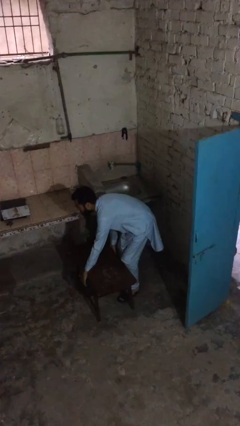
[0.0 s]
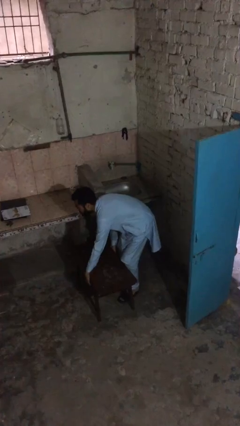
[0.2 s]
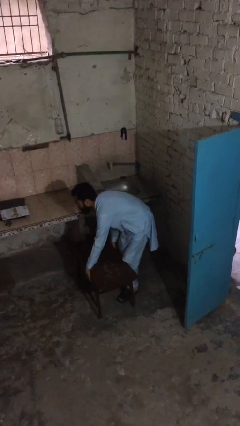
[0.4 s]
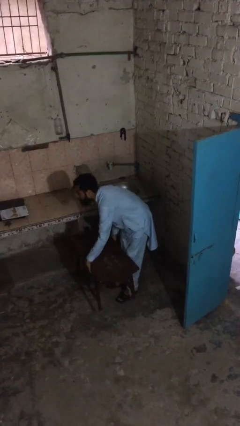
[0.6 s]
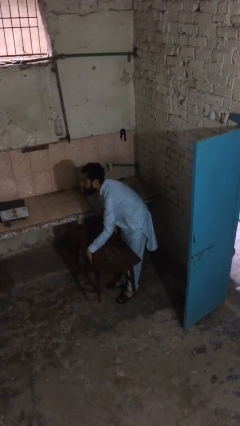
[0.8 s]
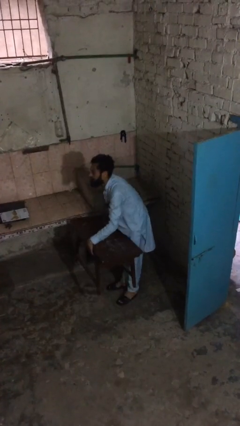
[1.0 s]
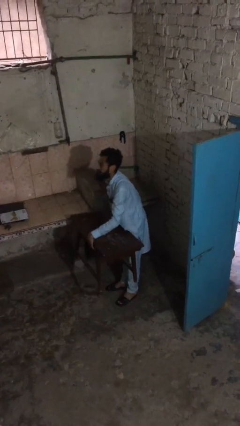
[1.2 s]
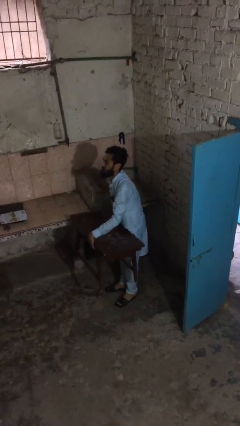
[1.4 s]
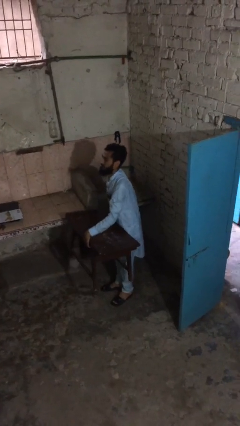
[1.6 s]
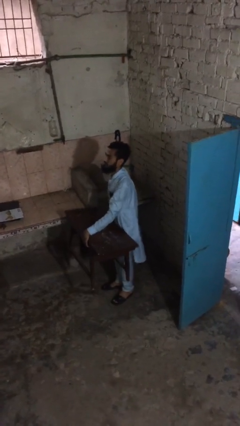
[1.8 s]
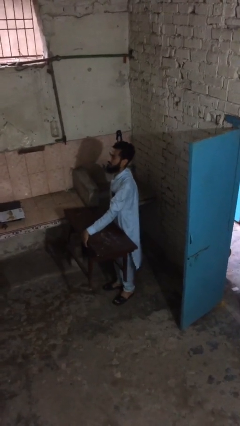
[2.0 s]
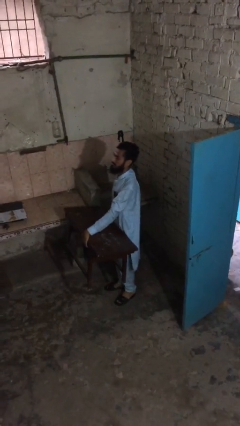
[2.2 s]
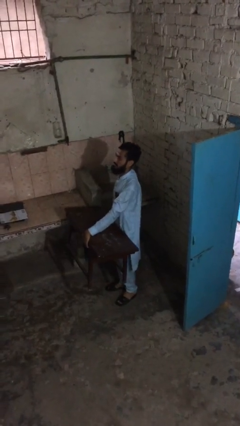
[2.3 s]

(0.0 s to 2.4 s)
person picks up object from floor

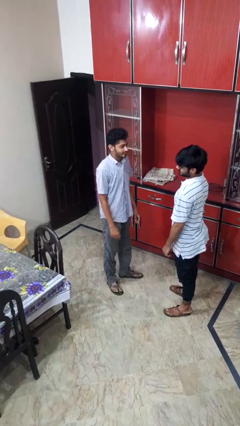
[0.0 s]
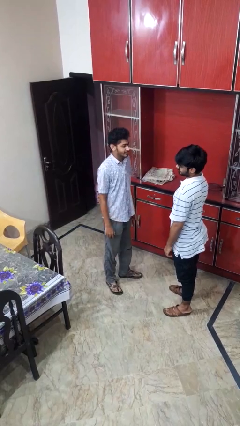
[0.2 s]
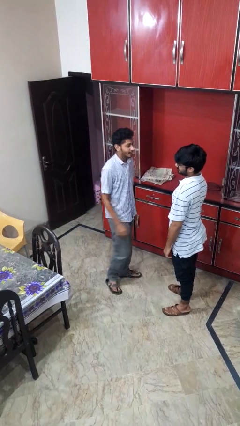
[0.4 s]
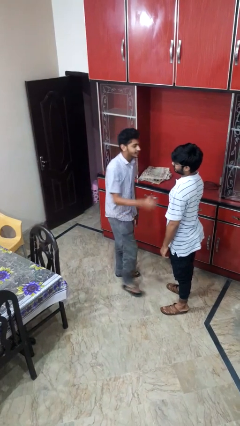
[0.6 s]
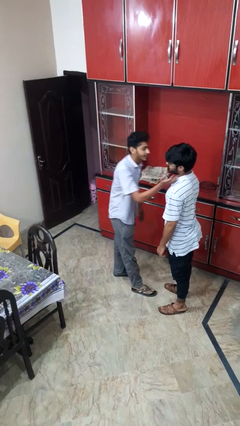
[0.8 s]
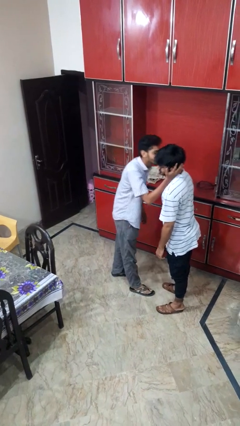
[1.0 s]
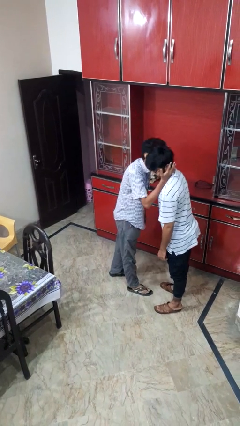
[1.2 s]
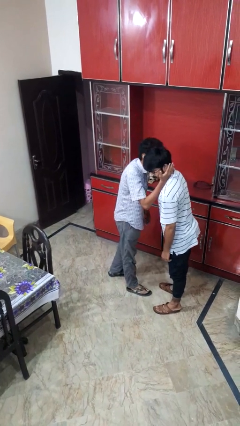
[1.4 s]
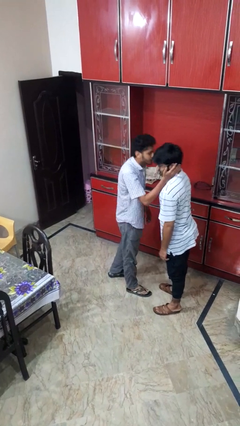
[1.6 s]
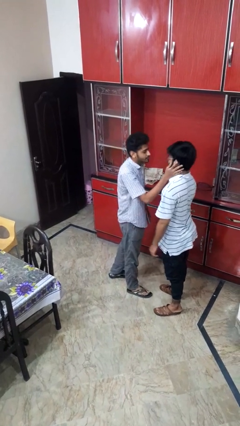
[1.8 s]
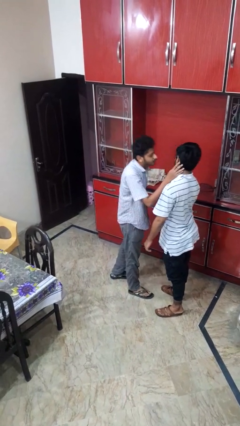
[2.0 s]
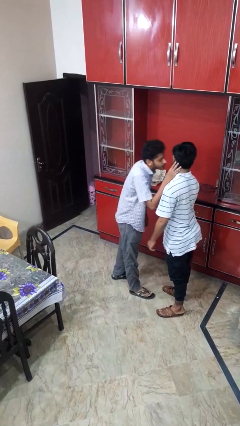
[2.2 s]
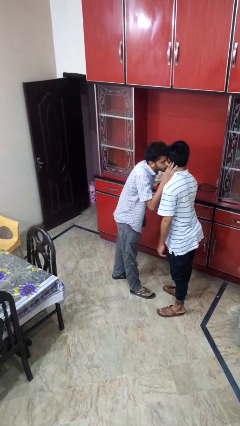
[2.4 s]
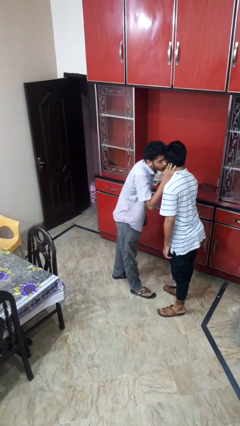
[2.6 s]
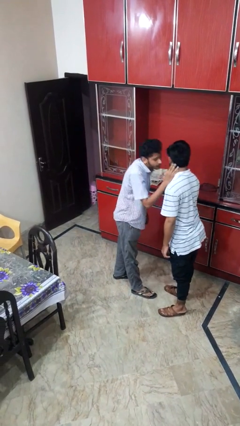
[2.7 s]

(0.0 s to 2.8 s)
person kisses cheek of person

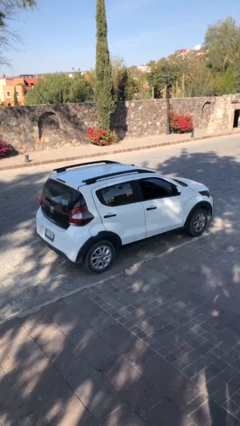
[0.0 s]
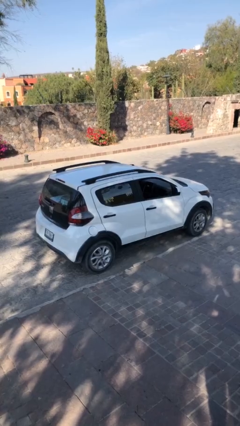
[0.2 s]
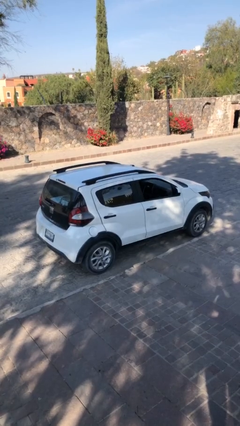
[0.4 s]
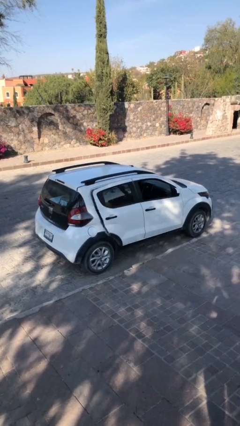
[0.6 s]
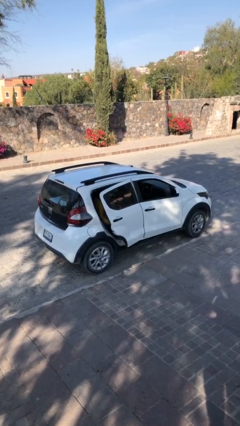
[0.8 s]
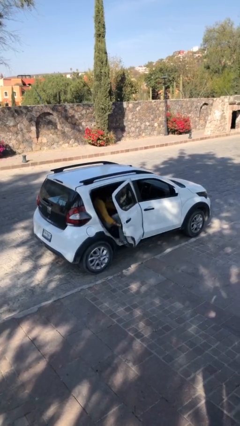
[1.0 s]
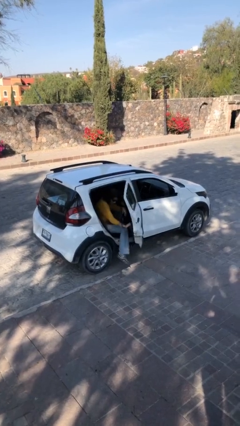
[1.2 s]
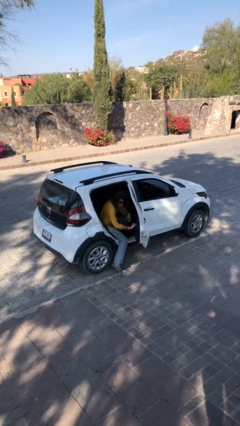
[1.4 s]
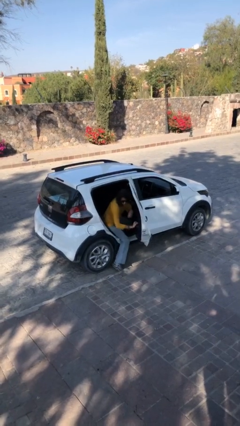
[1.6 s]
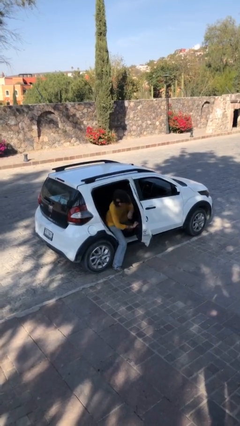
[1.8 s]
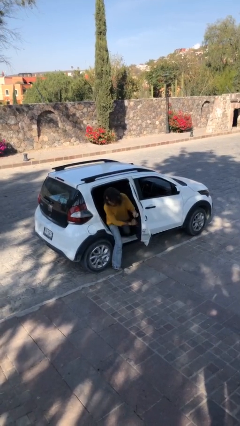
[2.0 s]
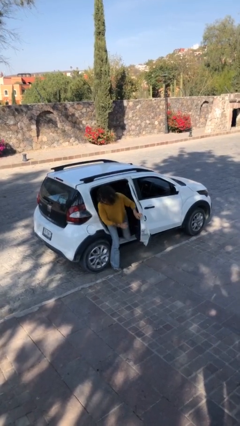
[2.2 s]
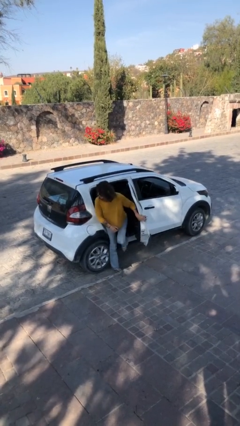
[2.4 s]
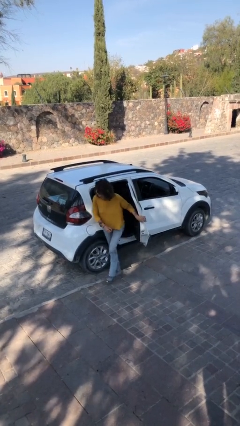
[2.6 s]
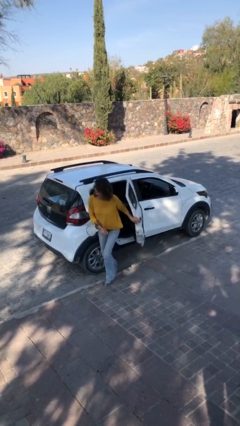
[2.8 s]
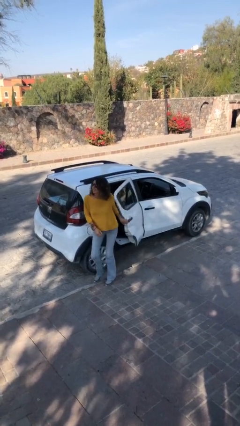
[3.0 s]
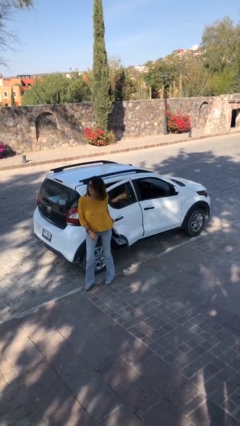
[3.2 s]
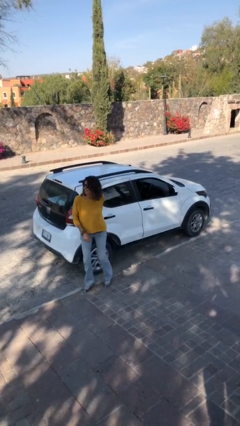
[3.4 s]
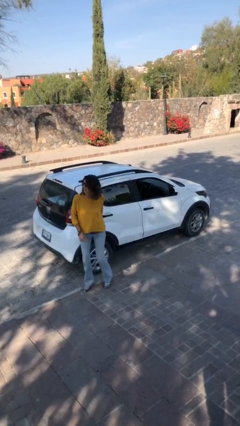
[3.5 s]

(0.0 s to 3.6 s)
car drops off person

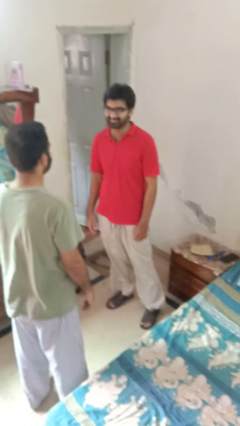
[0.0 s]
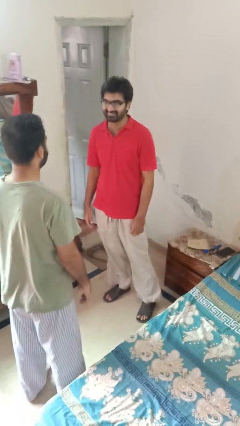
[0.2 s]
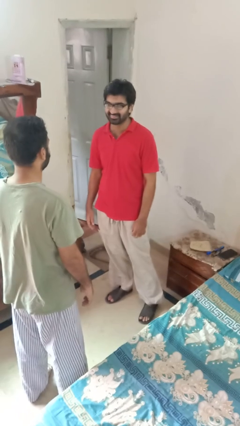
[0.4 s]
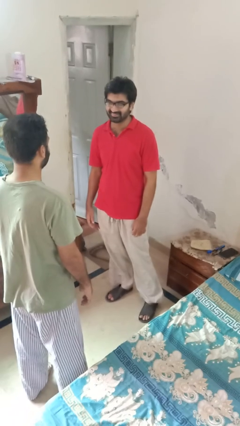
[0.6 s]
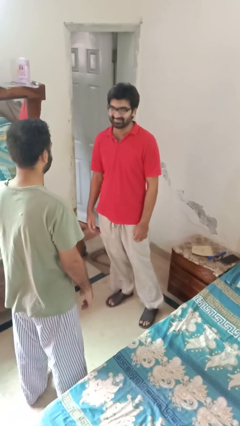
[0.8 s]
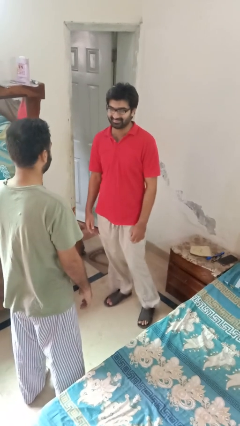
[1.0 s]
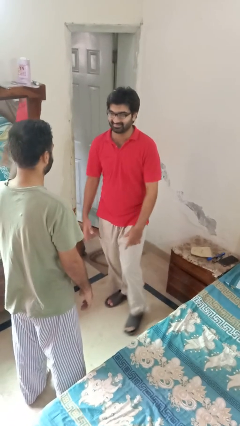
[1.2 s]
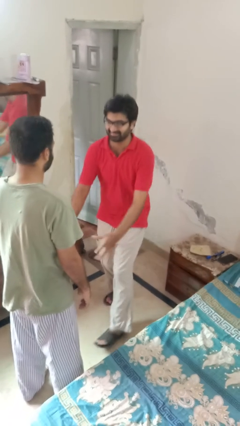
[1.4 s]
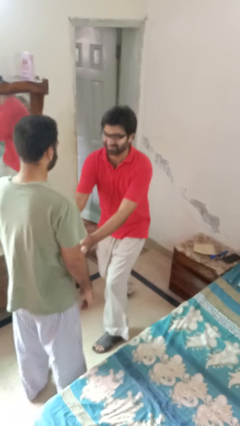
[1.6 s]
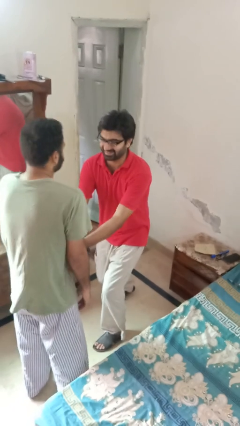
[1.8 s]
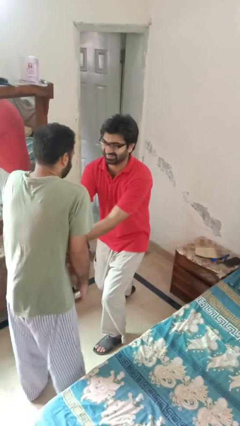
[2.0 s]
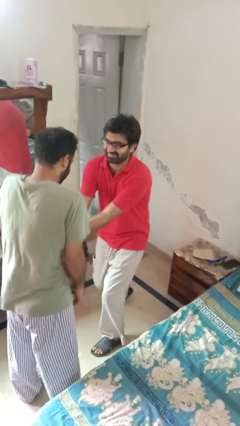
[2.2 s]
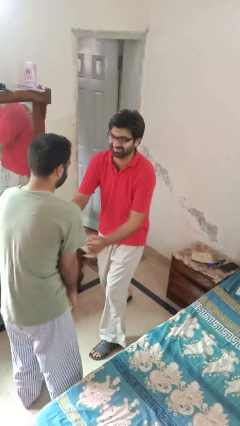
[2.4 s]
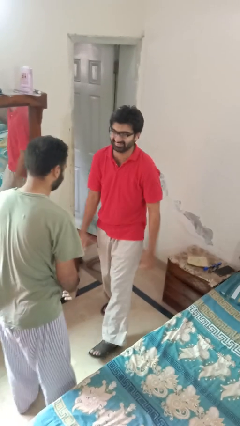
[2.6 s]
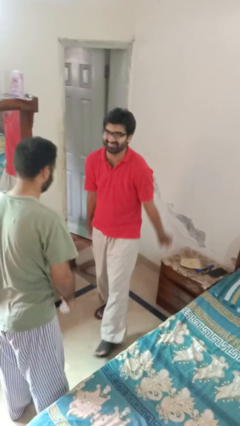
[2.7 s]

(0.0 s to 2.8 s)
person tickles person

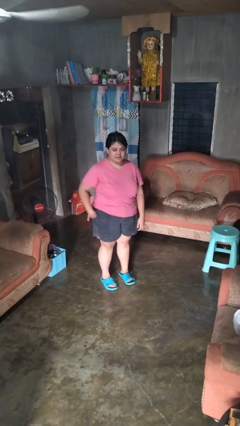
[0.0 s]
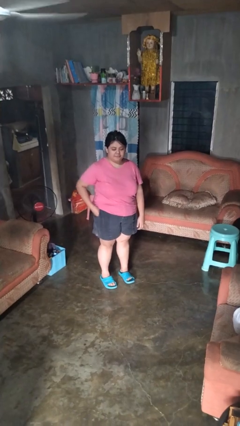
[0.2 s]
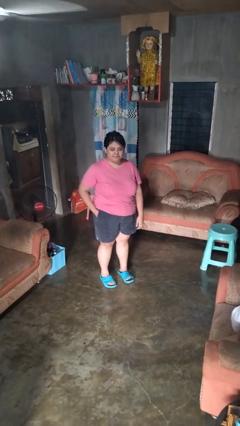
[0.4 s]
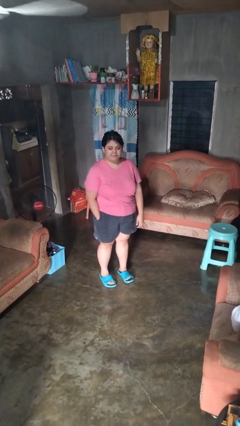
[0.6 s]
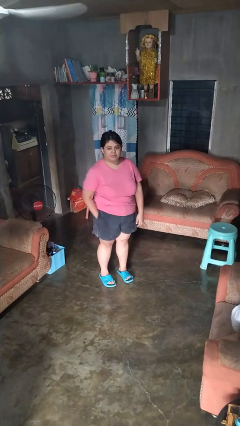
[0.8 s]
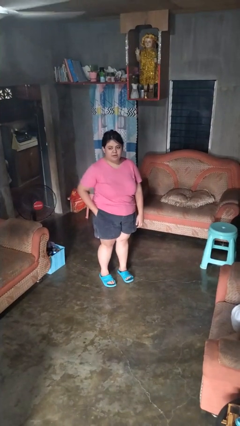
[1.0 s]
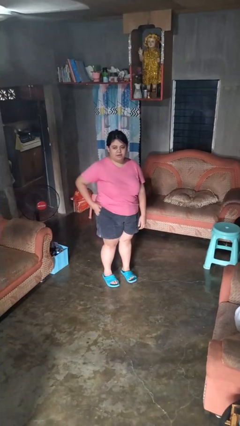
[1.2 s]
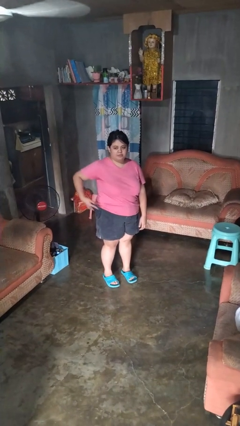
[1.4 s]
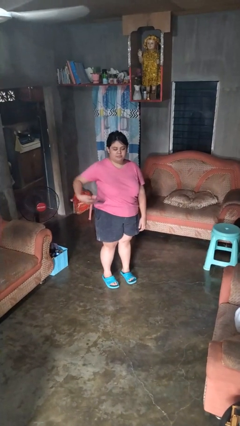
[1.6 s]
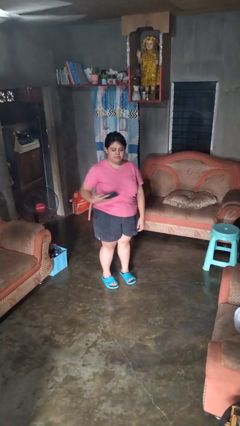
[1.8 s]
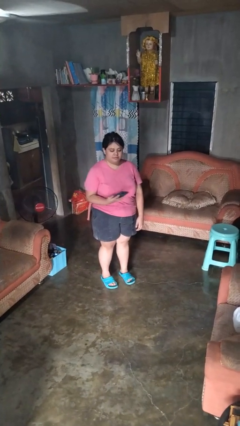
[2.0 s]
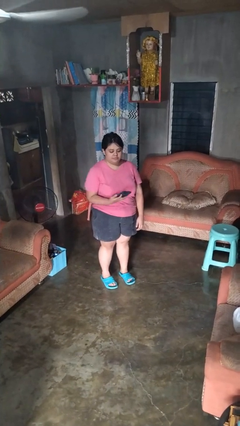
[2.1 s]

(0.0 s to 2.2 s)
person takes phone from pocket

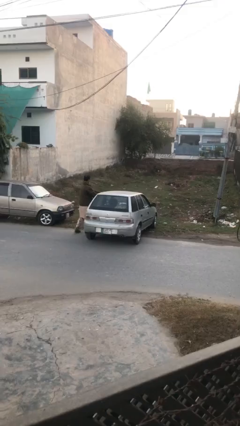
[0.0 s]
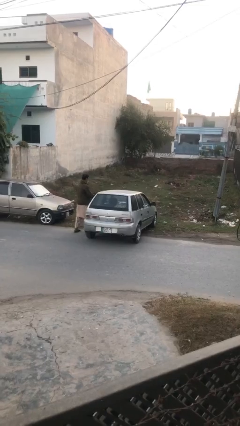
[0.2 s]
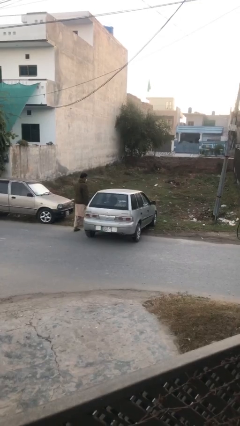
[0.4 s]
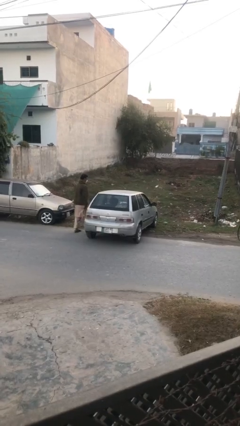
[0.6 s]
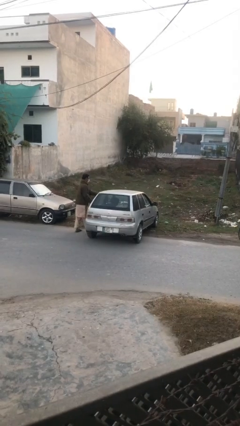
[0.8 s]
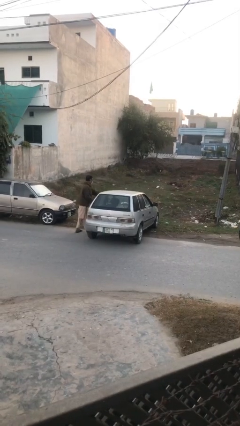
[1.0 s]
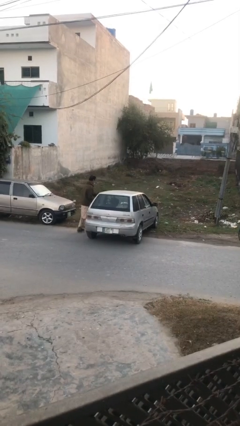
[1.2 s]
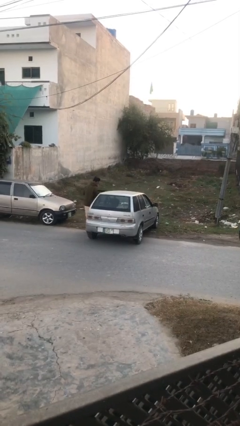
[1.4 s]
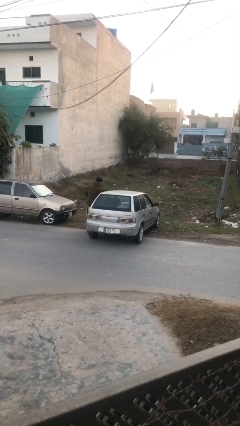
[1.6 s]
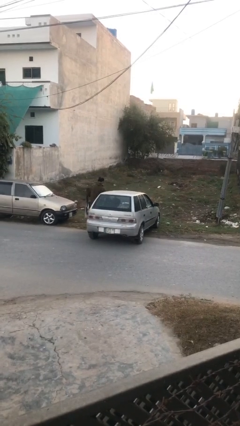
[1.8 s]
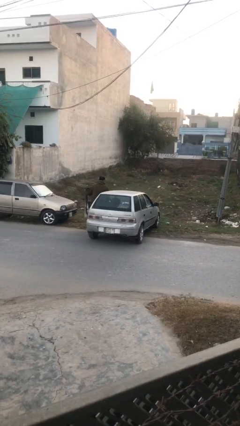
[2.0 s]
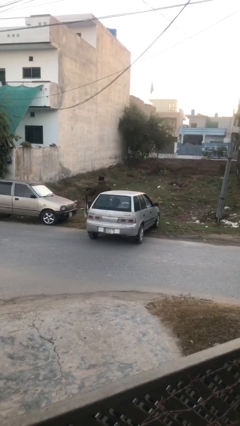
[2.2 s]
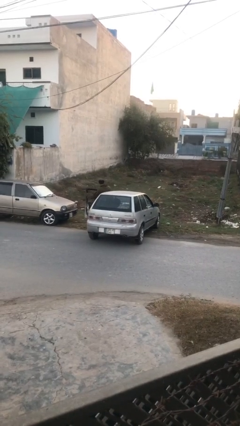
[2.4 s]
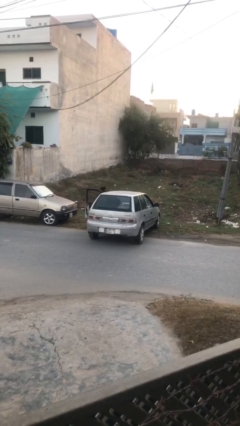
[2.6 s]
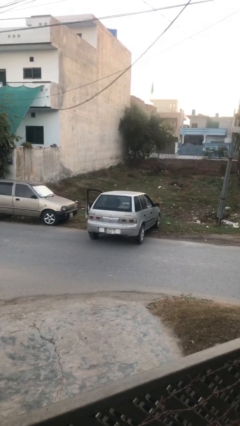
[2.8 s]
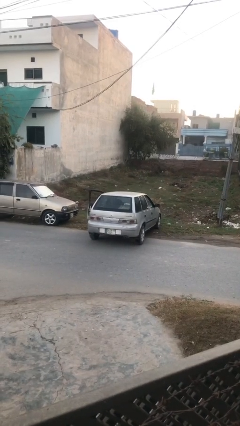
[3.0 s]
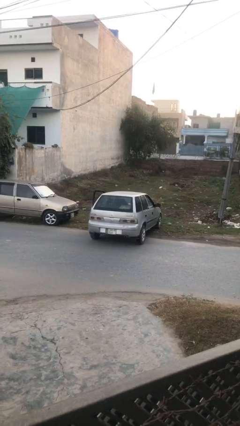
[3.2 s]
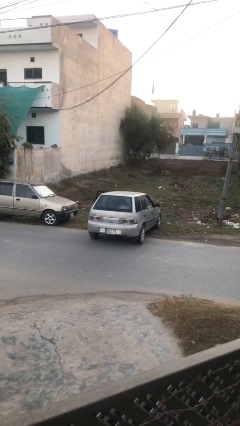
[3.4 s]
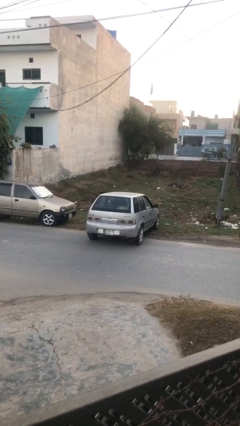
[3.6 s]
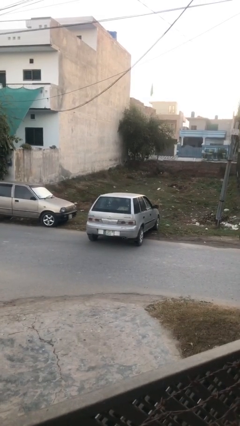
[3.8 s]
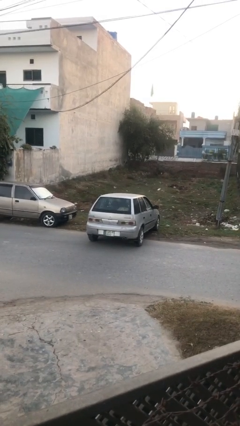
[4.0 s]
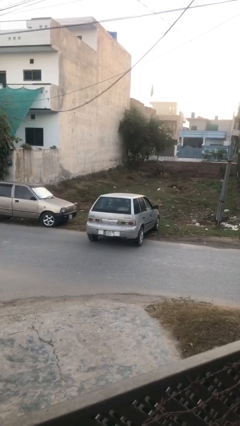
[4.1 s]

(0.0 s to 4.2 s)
car picks up person
